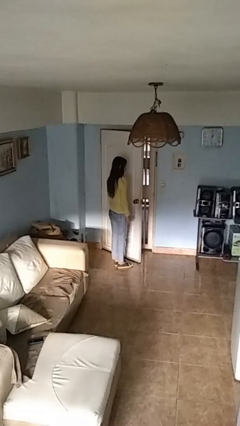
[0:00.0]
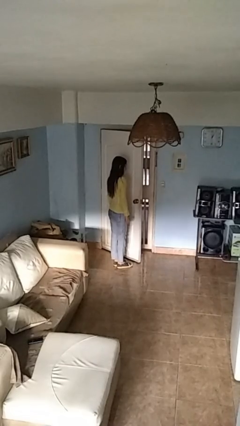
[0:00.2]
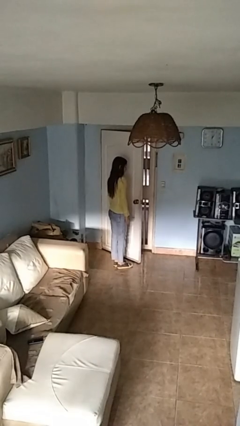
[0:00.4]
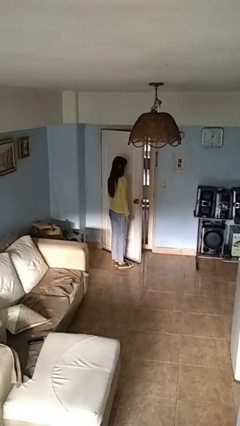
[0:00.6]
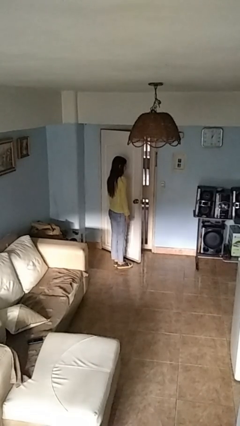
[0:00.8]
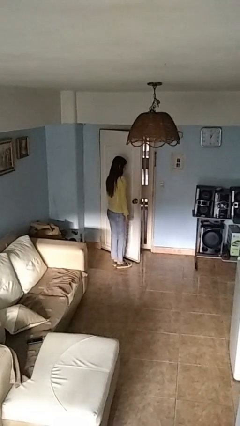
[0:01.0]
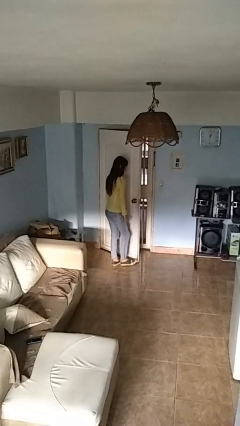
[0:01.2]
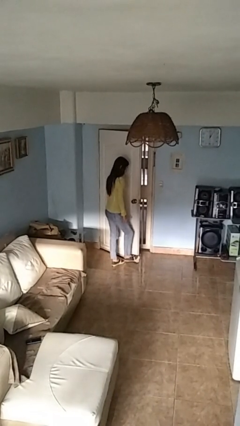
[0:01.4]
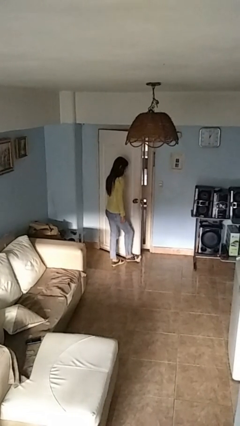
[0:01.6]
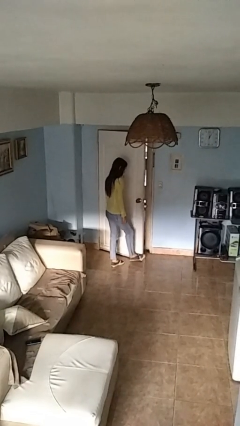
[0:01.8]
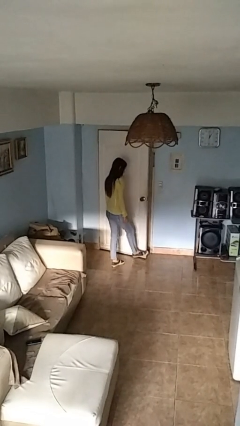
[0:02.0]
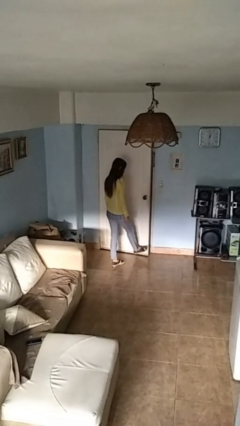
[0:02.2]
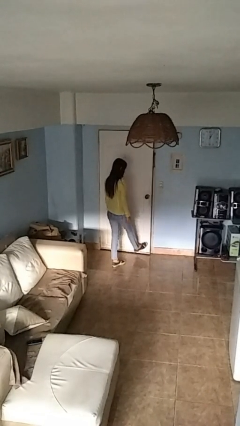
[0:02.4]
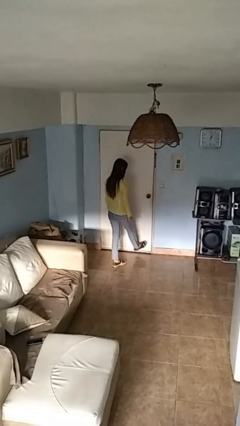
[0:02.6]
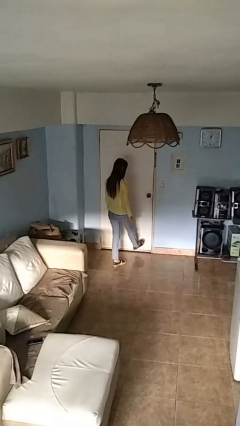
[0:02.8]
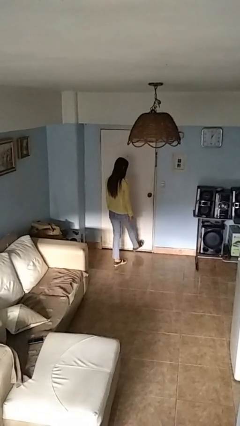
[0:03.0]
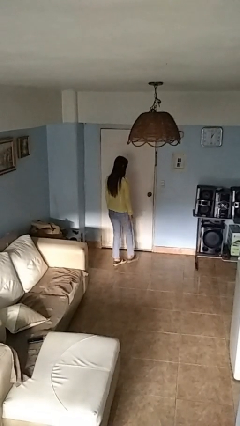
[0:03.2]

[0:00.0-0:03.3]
person closes door with foot

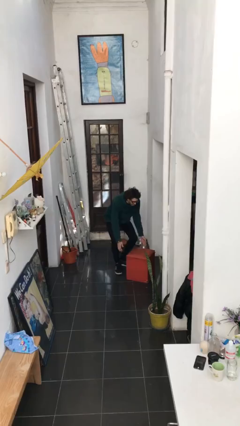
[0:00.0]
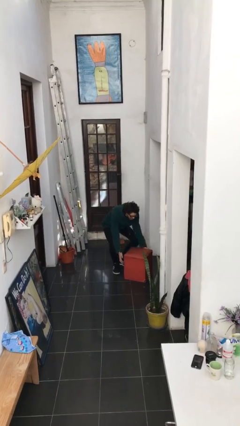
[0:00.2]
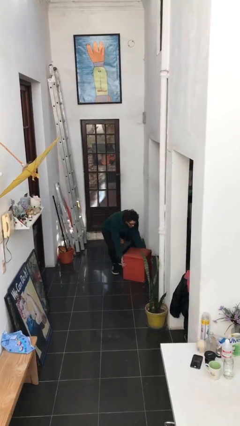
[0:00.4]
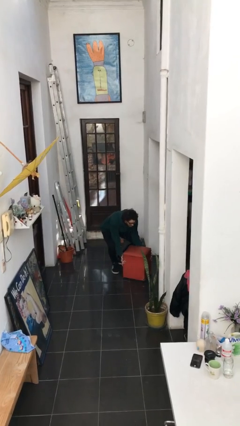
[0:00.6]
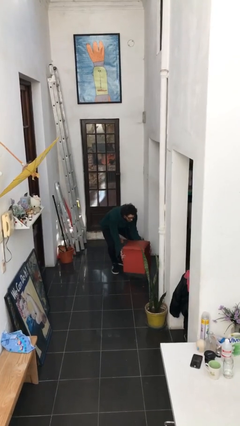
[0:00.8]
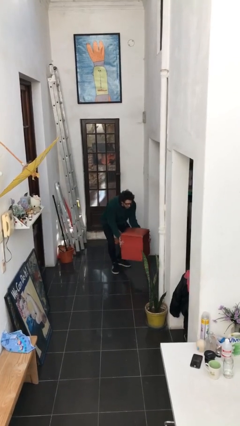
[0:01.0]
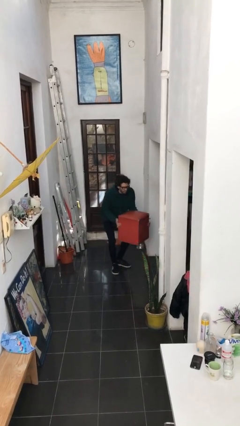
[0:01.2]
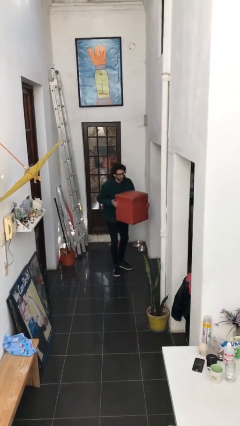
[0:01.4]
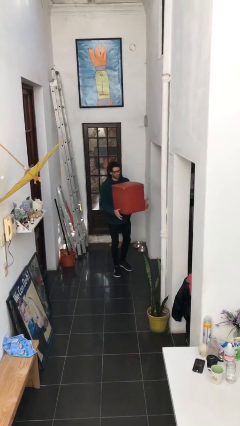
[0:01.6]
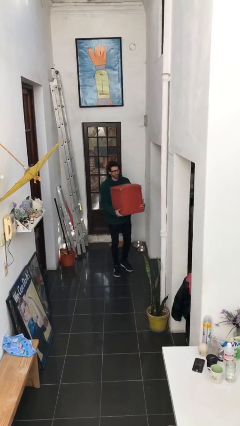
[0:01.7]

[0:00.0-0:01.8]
person picks up object from floor

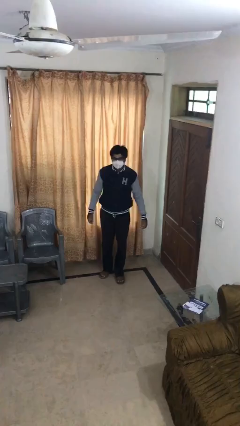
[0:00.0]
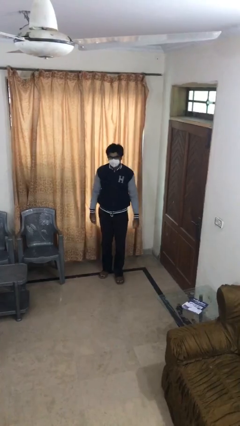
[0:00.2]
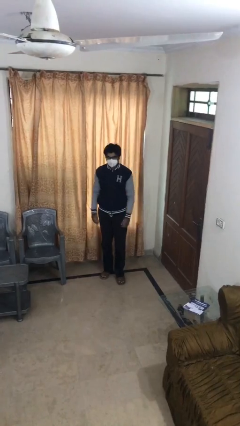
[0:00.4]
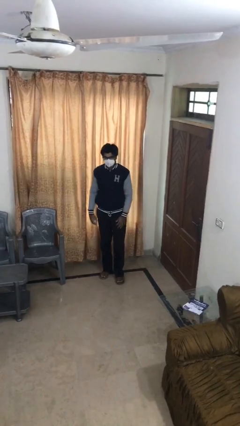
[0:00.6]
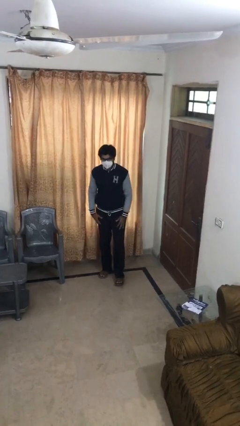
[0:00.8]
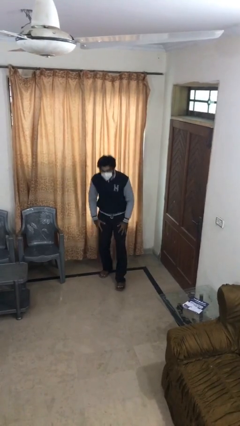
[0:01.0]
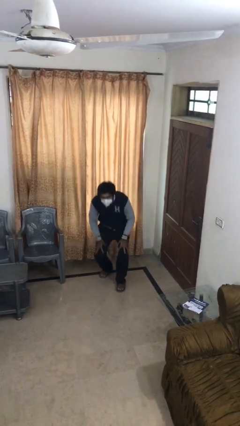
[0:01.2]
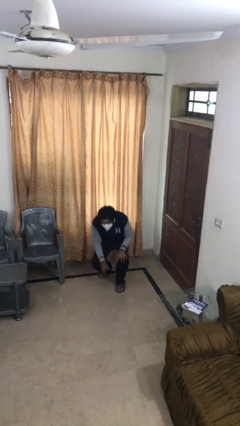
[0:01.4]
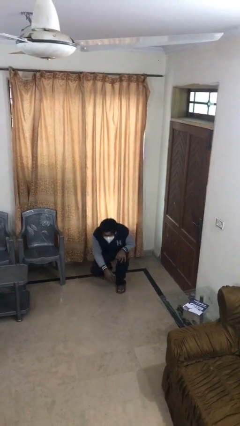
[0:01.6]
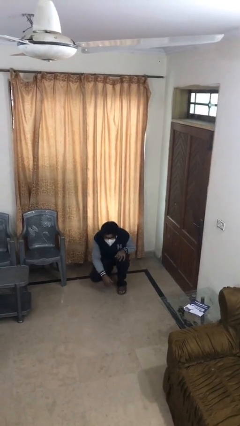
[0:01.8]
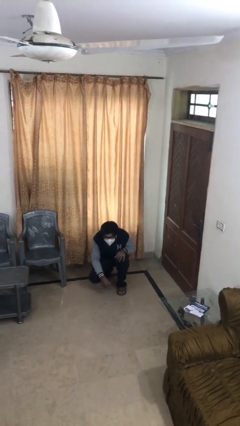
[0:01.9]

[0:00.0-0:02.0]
person sits down

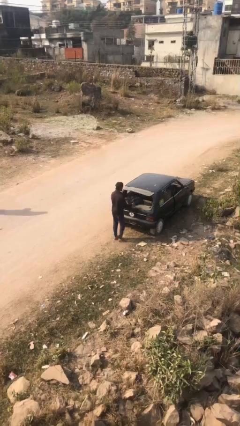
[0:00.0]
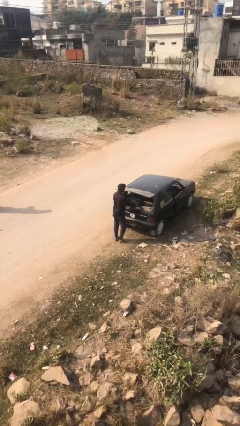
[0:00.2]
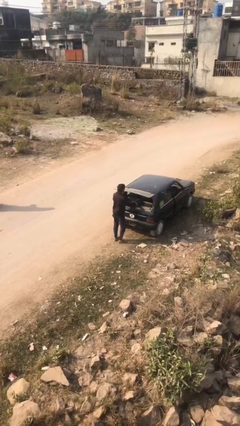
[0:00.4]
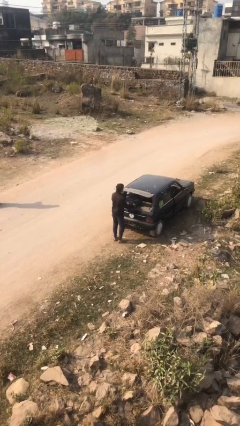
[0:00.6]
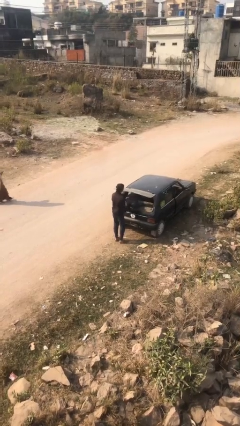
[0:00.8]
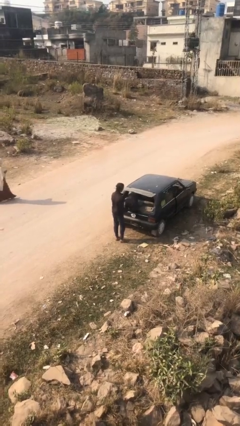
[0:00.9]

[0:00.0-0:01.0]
person unloads car

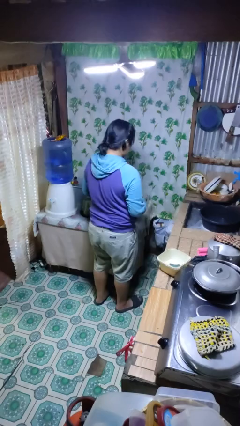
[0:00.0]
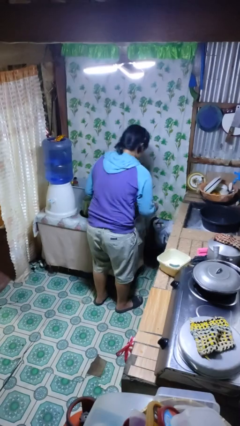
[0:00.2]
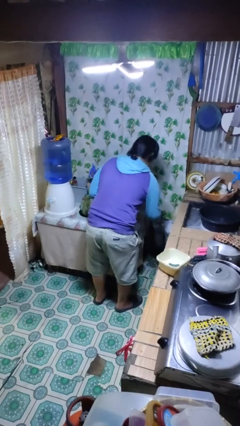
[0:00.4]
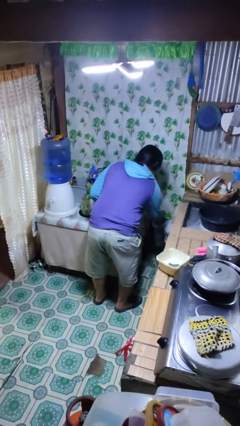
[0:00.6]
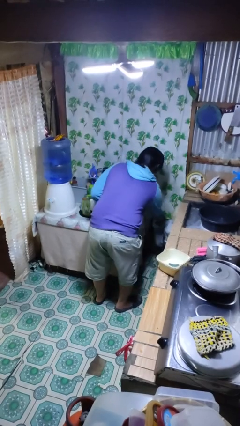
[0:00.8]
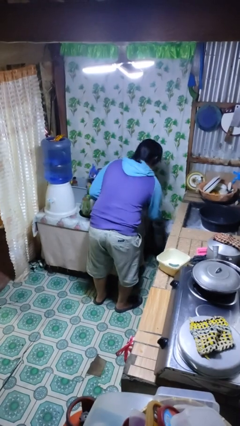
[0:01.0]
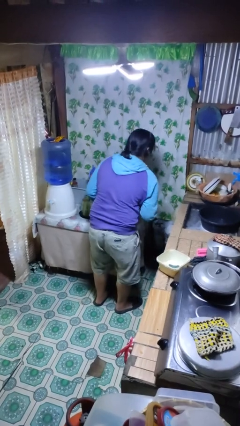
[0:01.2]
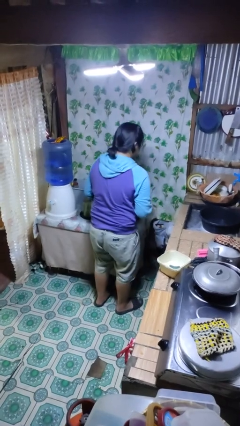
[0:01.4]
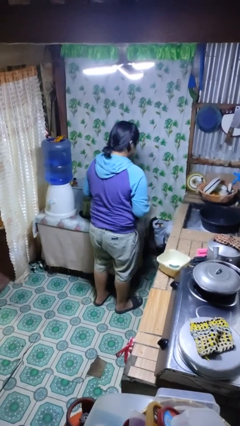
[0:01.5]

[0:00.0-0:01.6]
person discards trash

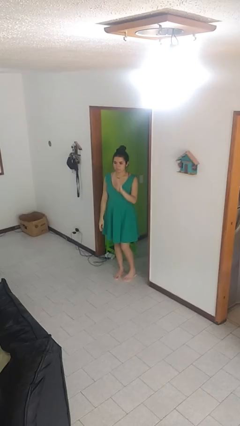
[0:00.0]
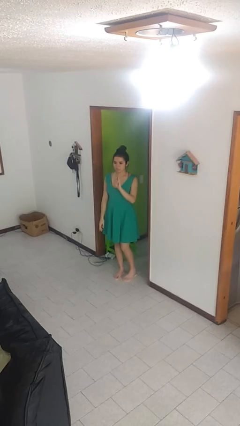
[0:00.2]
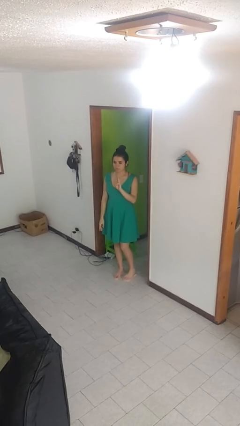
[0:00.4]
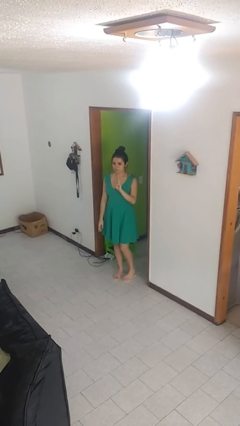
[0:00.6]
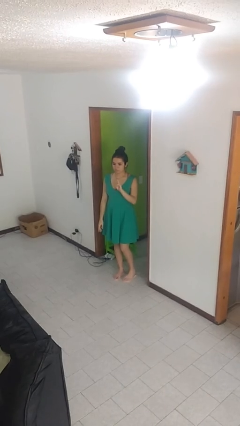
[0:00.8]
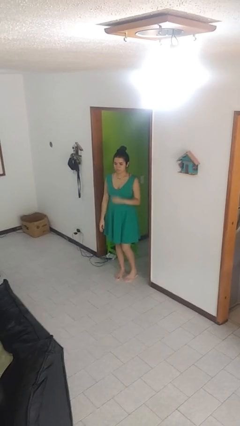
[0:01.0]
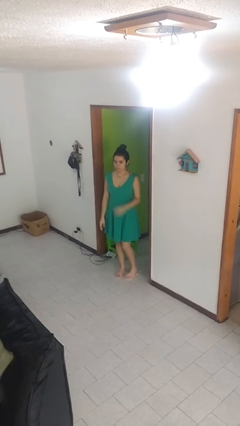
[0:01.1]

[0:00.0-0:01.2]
person gestures number three

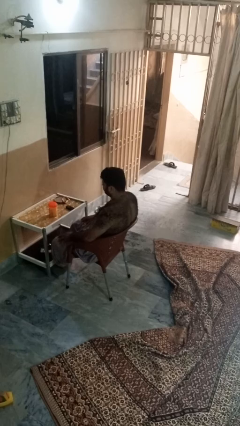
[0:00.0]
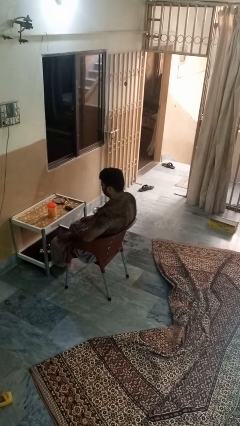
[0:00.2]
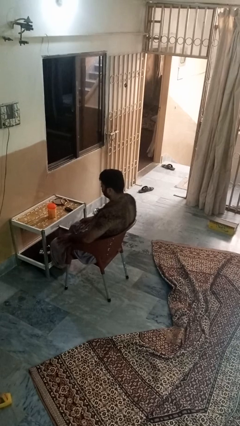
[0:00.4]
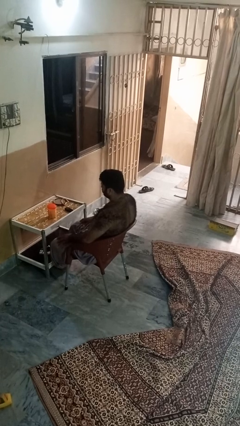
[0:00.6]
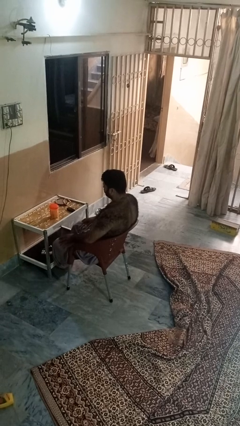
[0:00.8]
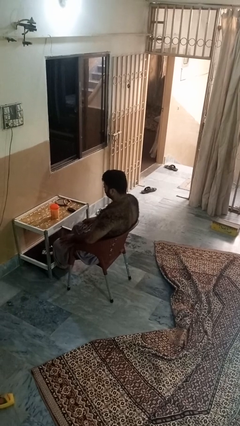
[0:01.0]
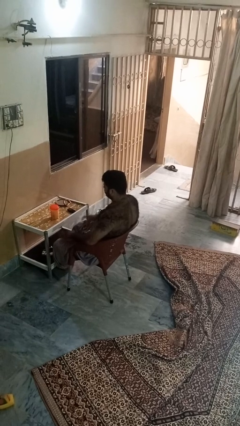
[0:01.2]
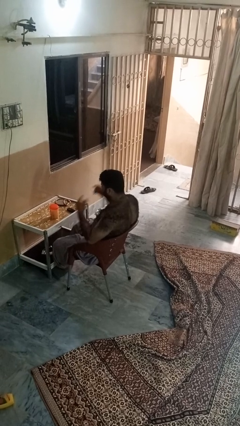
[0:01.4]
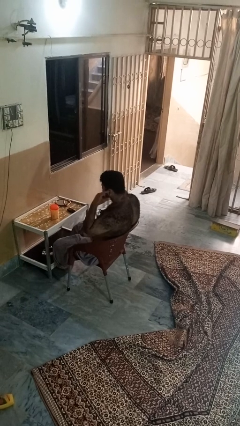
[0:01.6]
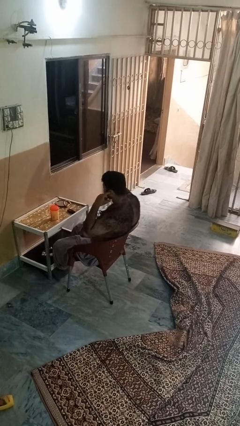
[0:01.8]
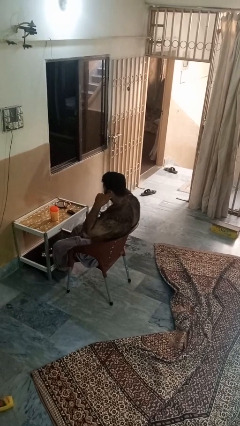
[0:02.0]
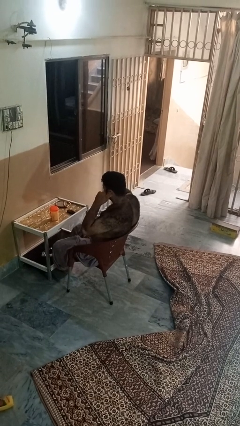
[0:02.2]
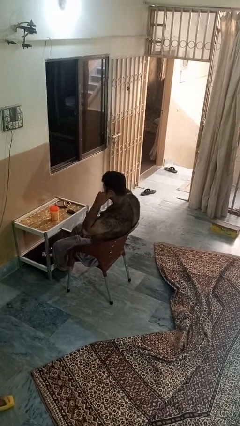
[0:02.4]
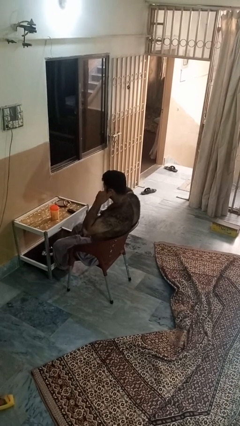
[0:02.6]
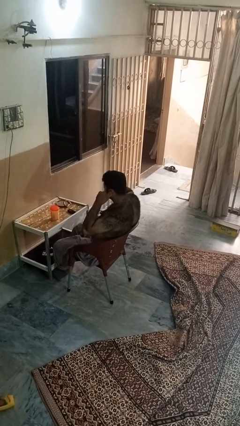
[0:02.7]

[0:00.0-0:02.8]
person puts fingers in ear

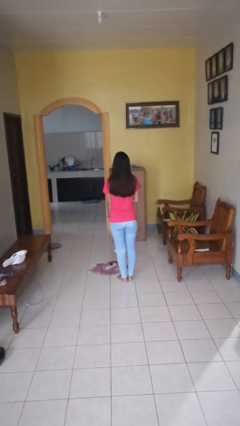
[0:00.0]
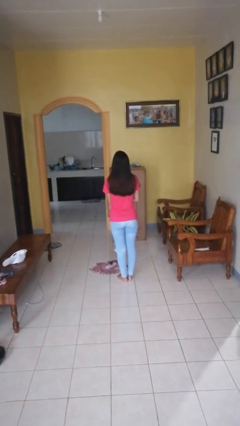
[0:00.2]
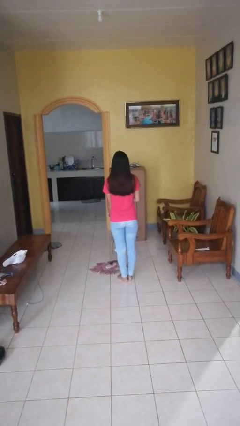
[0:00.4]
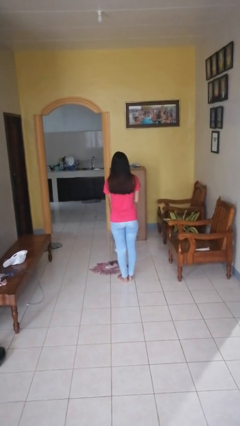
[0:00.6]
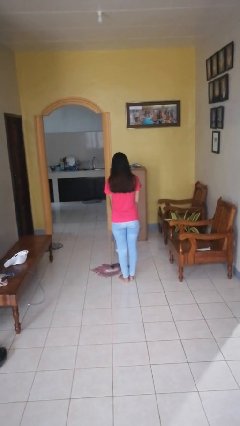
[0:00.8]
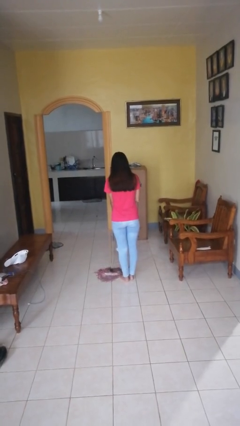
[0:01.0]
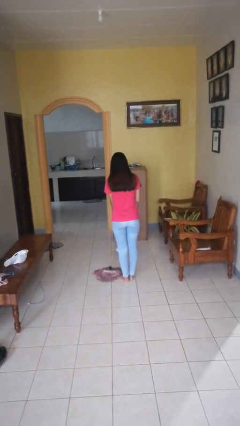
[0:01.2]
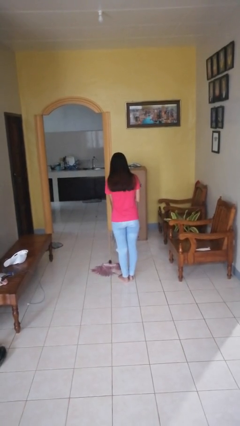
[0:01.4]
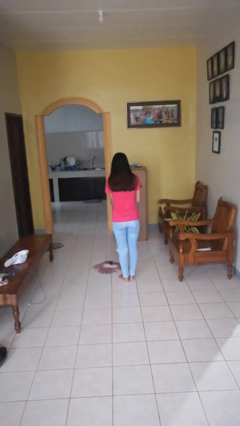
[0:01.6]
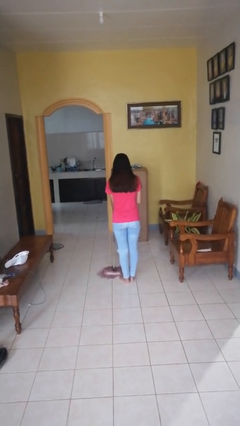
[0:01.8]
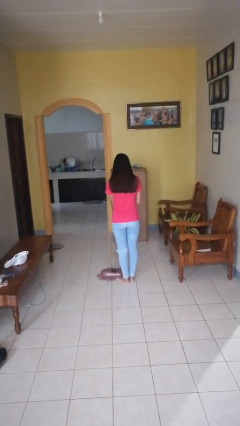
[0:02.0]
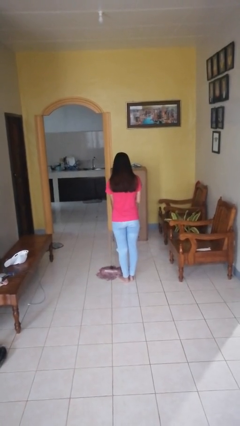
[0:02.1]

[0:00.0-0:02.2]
person mops

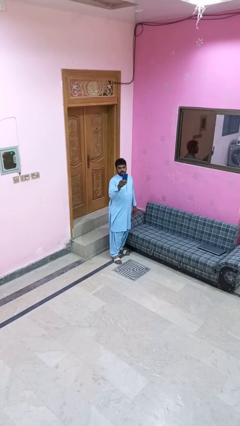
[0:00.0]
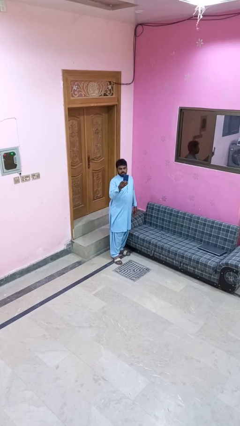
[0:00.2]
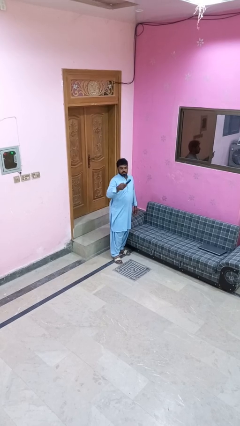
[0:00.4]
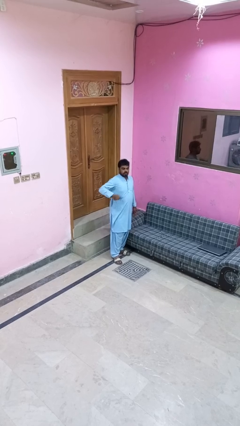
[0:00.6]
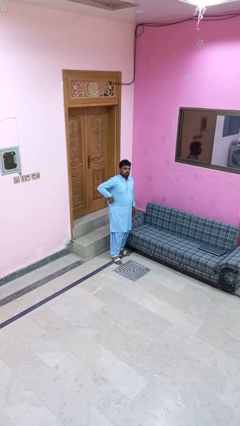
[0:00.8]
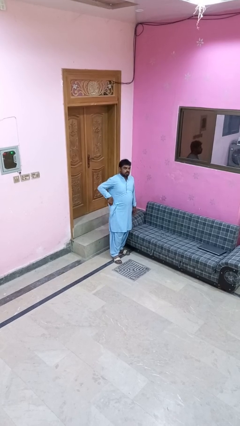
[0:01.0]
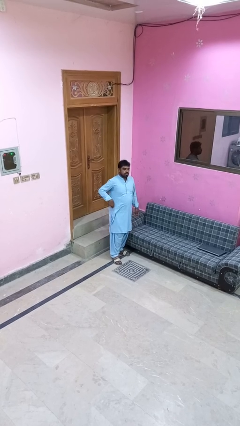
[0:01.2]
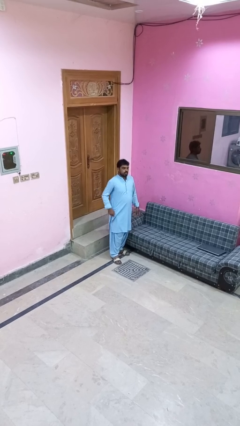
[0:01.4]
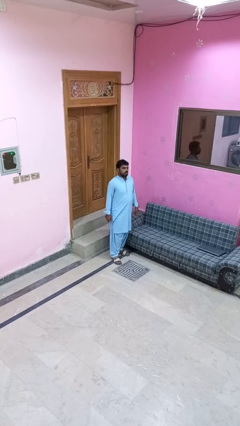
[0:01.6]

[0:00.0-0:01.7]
person puts phone into pocket
